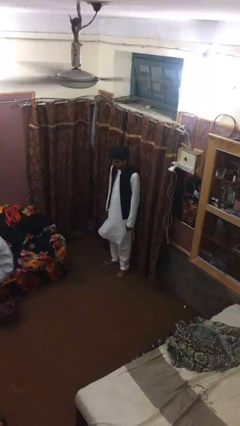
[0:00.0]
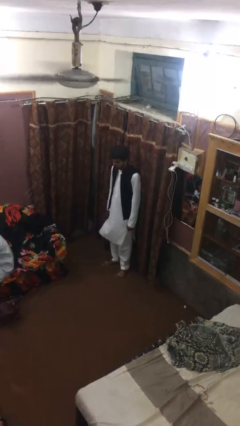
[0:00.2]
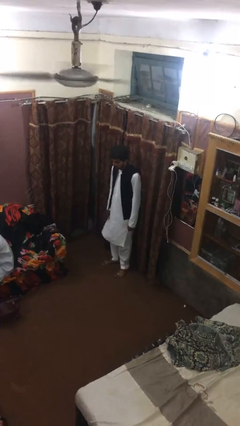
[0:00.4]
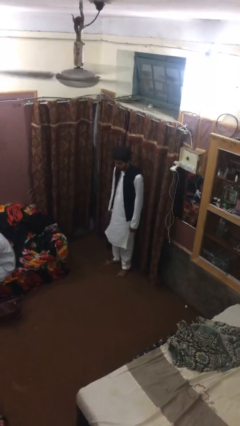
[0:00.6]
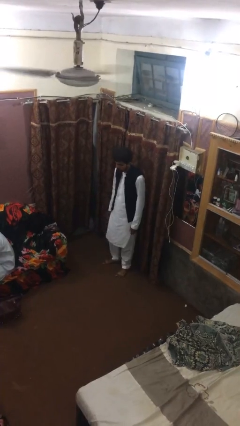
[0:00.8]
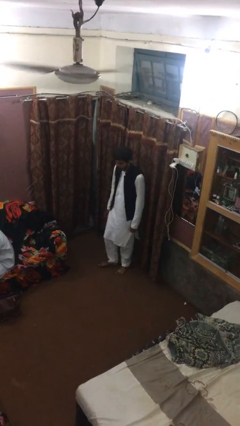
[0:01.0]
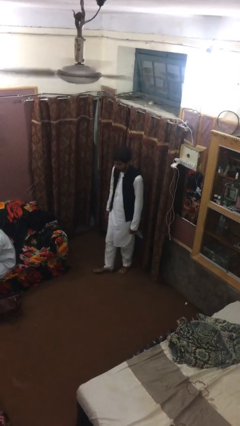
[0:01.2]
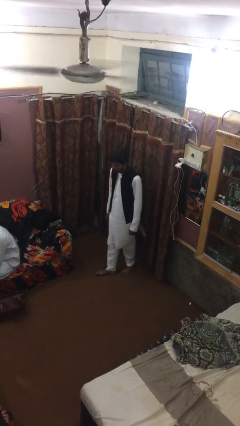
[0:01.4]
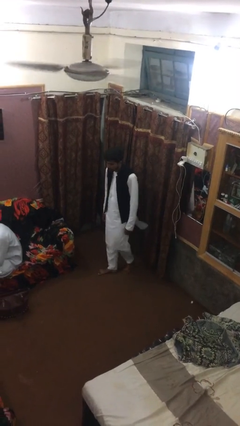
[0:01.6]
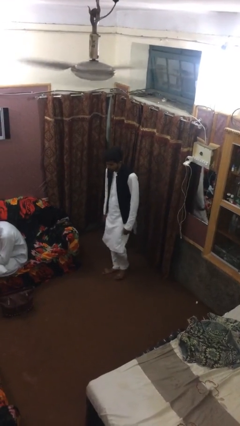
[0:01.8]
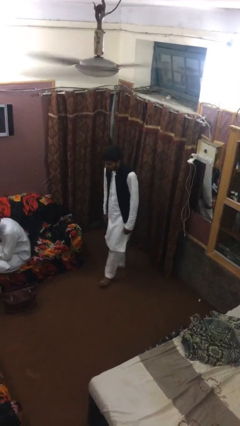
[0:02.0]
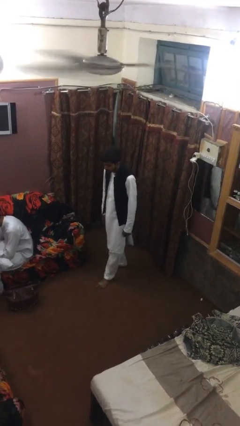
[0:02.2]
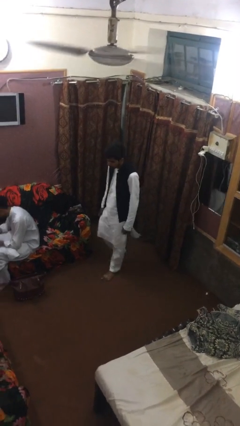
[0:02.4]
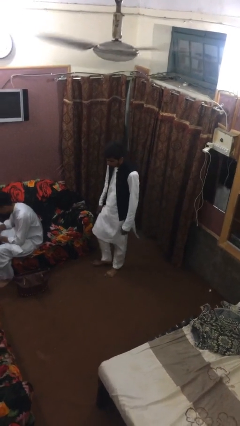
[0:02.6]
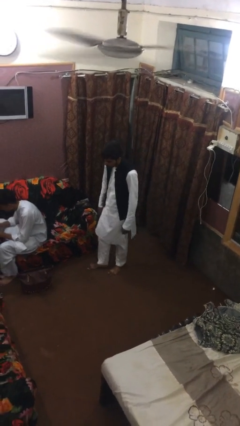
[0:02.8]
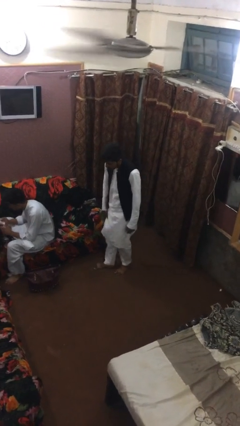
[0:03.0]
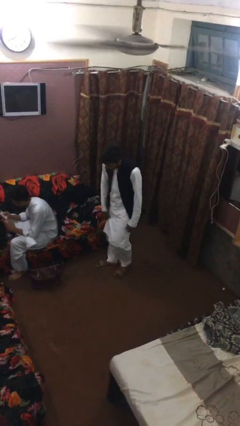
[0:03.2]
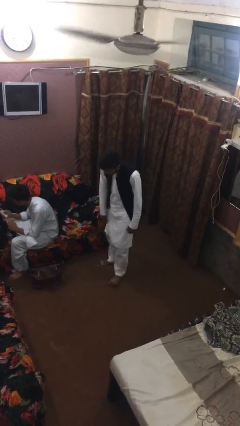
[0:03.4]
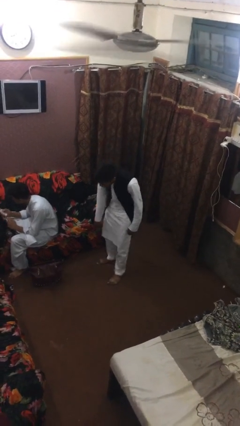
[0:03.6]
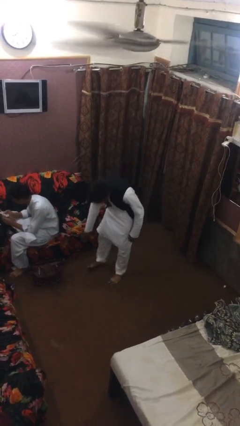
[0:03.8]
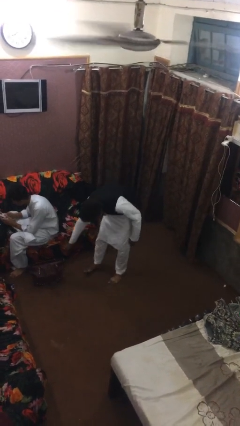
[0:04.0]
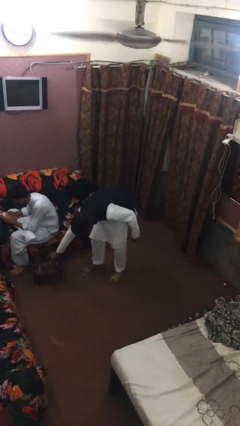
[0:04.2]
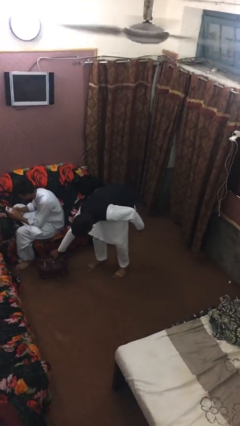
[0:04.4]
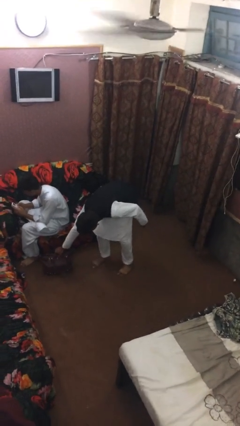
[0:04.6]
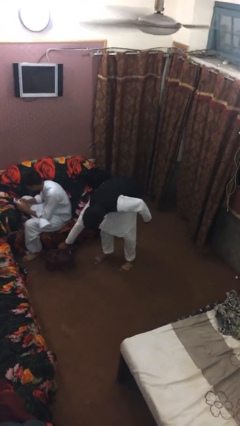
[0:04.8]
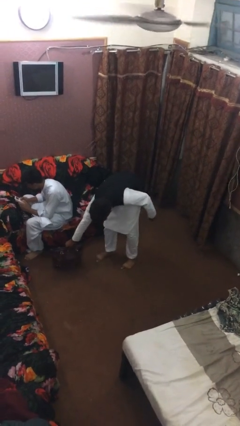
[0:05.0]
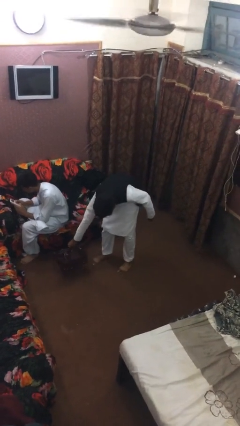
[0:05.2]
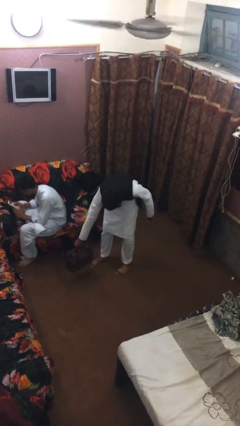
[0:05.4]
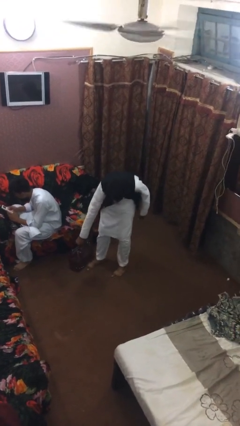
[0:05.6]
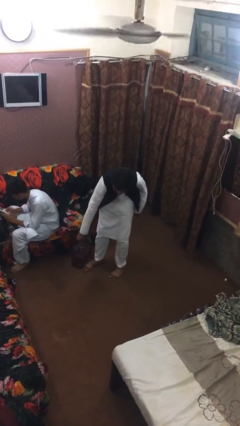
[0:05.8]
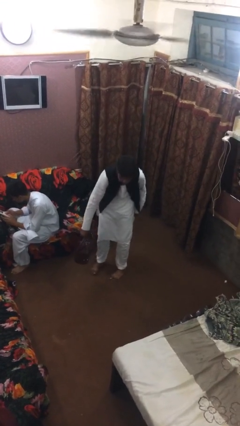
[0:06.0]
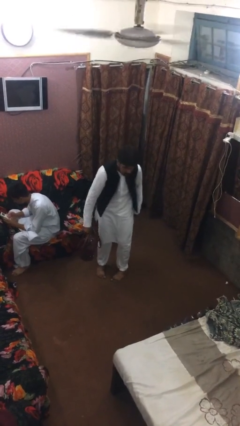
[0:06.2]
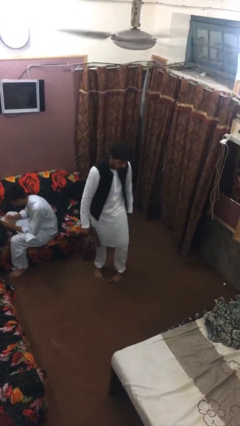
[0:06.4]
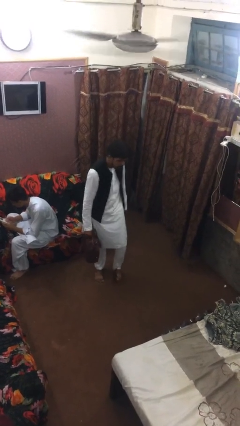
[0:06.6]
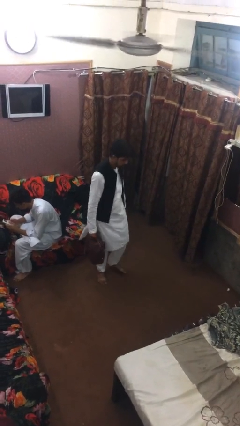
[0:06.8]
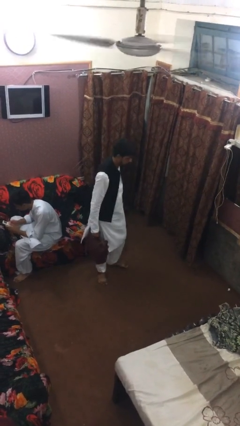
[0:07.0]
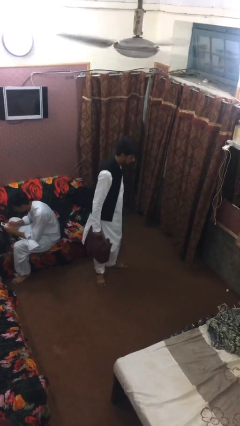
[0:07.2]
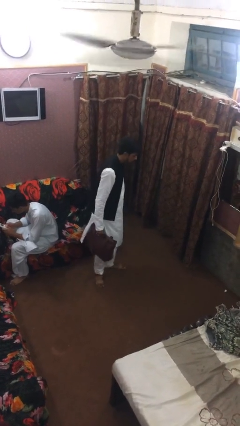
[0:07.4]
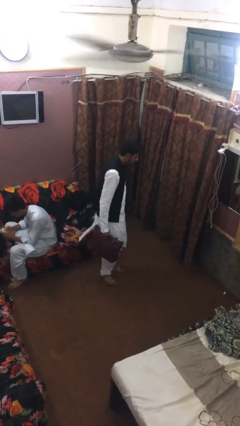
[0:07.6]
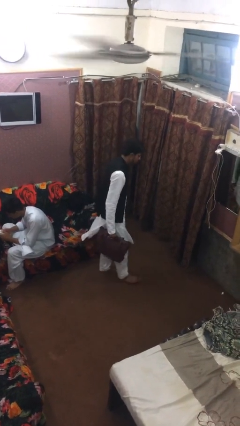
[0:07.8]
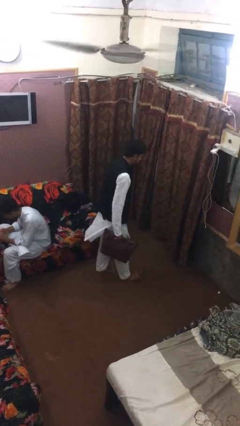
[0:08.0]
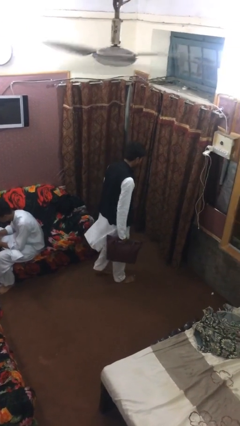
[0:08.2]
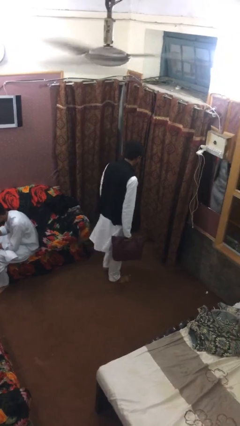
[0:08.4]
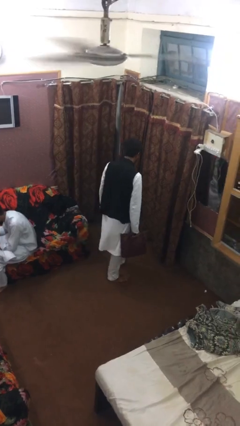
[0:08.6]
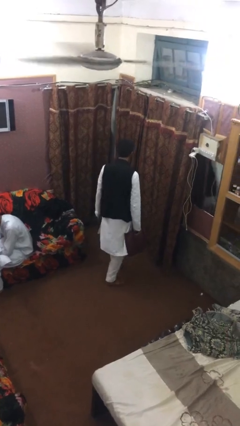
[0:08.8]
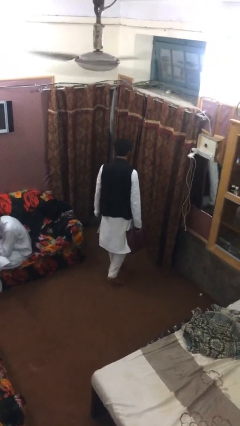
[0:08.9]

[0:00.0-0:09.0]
person steals object from person

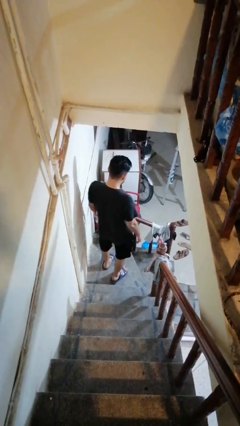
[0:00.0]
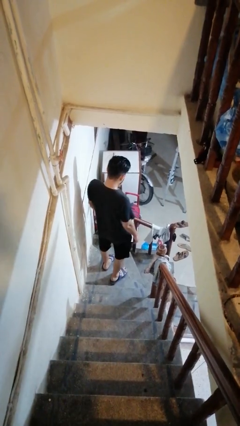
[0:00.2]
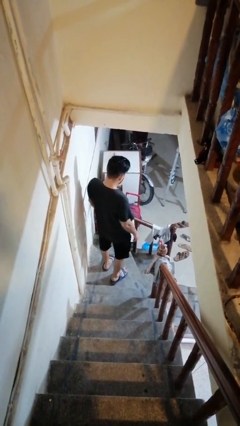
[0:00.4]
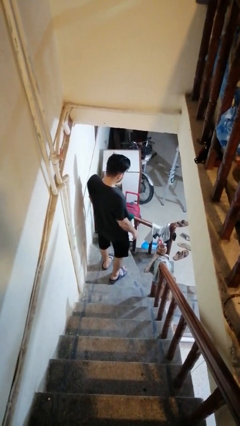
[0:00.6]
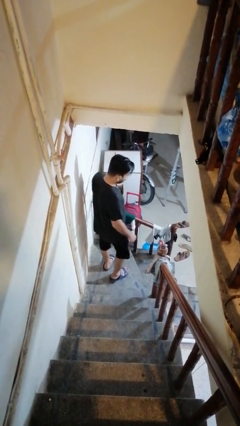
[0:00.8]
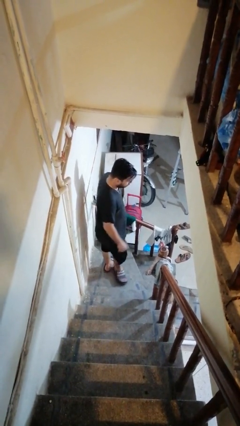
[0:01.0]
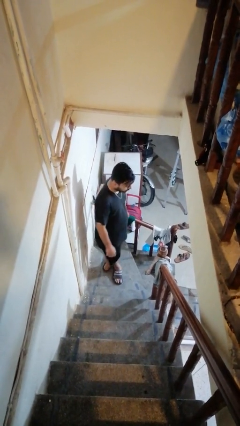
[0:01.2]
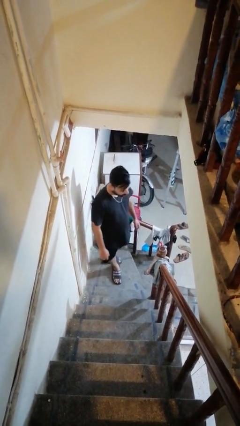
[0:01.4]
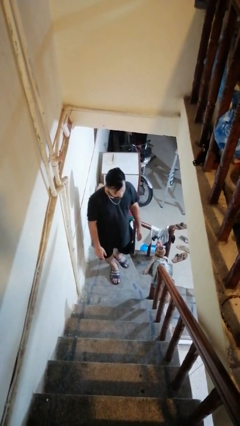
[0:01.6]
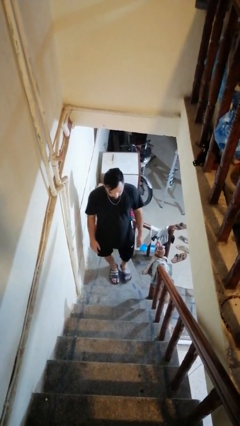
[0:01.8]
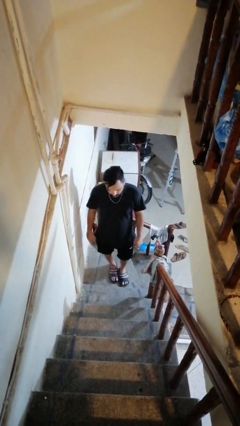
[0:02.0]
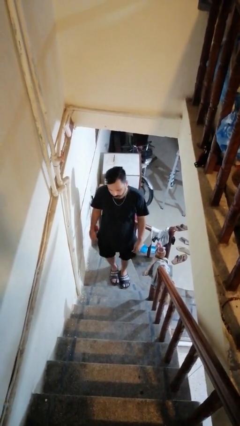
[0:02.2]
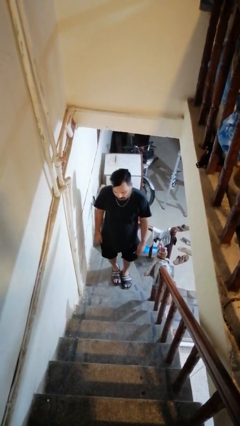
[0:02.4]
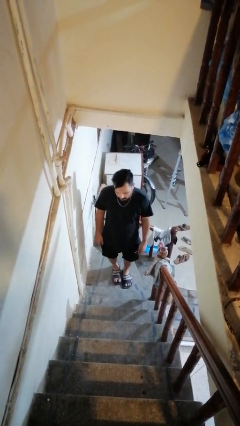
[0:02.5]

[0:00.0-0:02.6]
person trips on stair

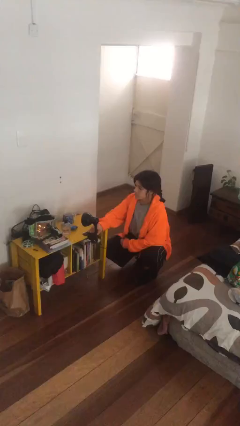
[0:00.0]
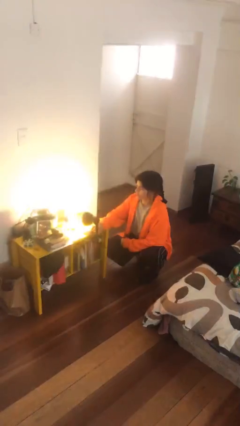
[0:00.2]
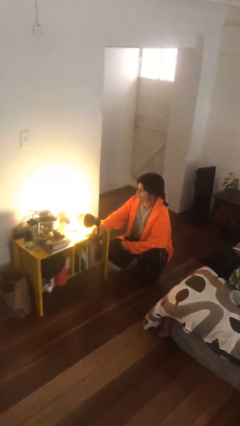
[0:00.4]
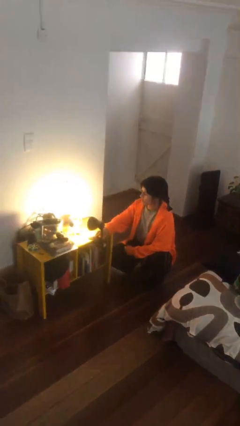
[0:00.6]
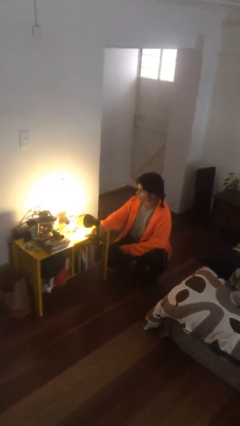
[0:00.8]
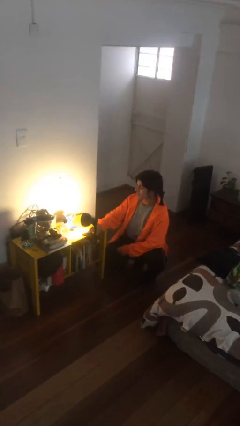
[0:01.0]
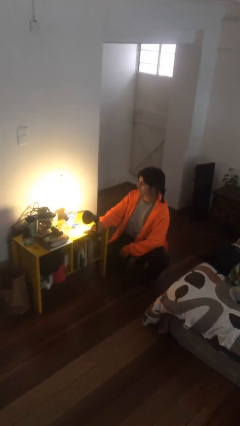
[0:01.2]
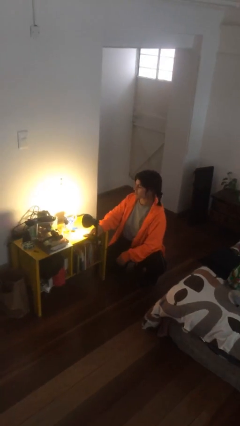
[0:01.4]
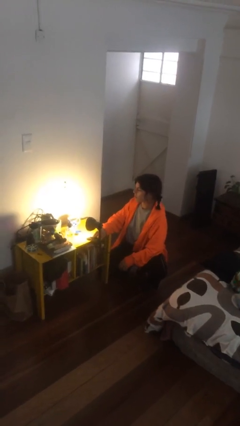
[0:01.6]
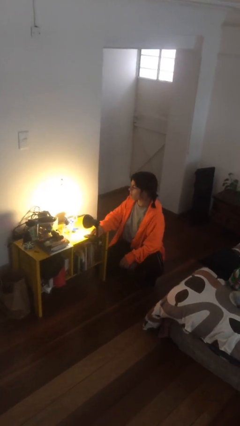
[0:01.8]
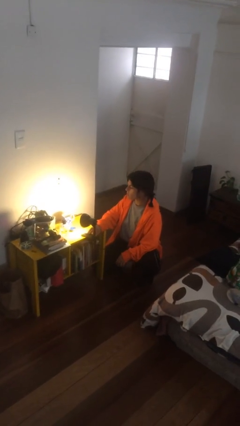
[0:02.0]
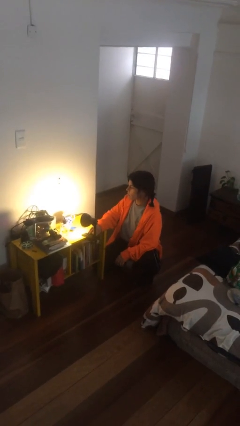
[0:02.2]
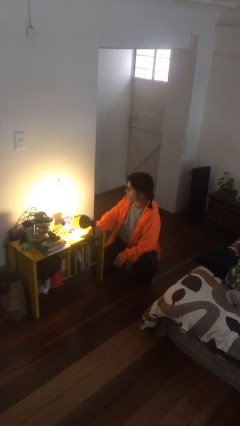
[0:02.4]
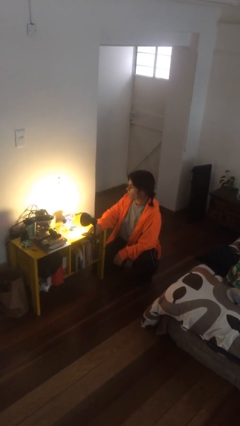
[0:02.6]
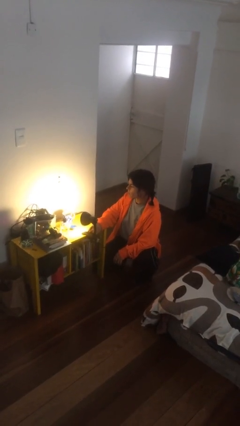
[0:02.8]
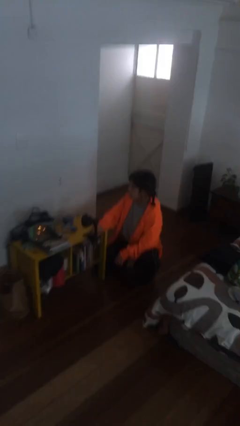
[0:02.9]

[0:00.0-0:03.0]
person turns on lamp

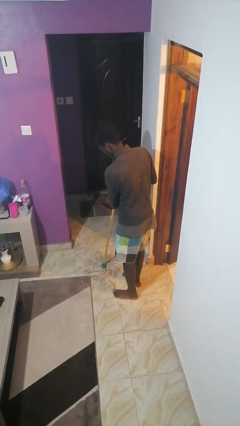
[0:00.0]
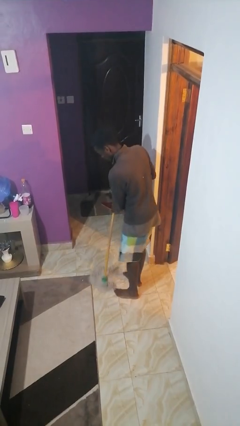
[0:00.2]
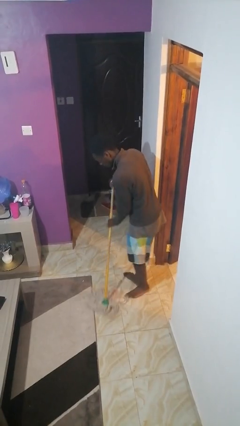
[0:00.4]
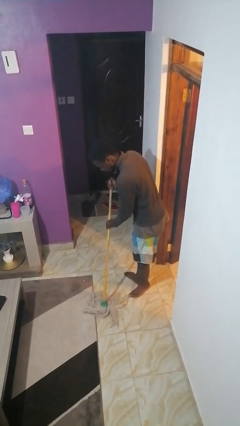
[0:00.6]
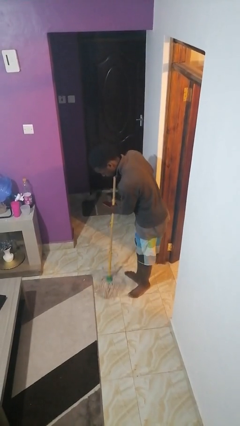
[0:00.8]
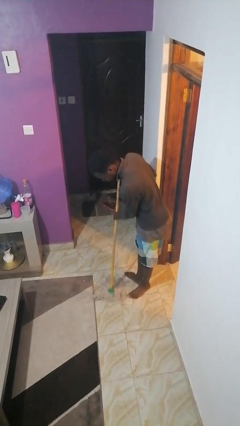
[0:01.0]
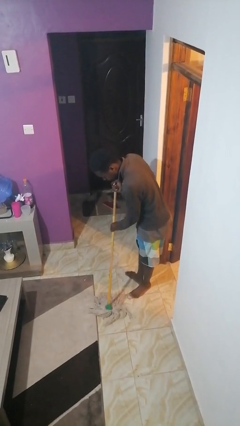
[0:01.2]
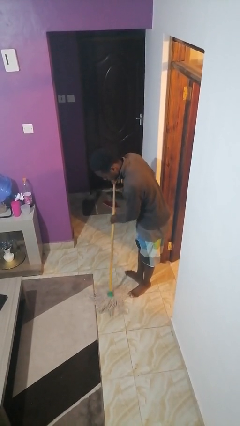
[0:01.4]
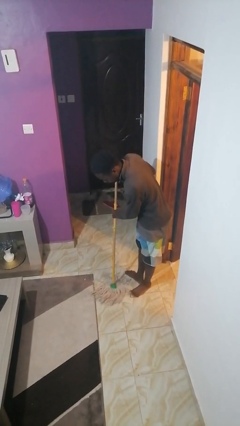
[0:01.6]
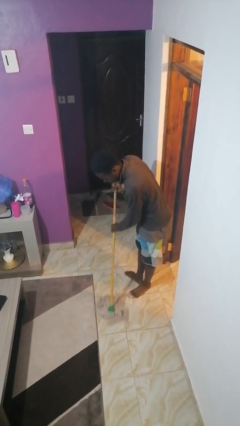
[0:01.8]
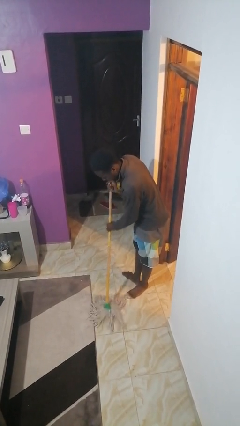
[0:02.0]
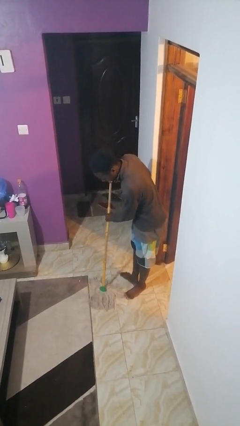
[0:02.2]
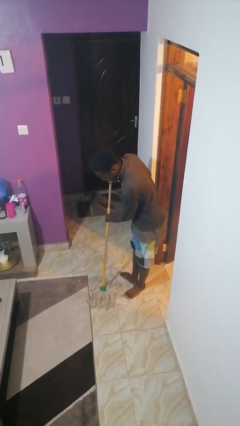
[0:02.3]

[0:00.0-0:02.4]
person mops

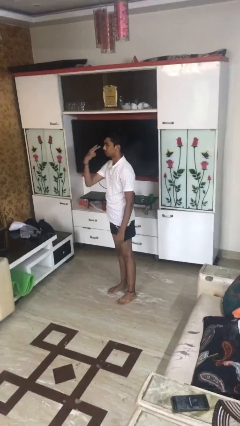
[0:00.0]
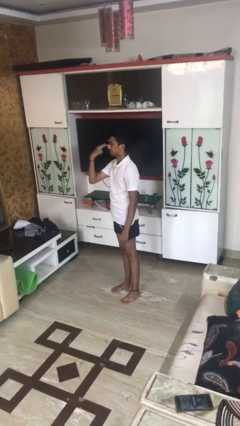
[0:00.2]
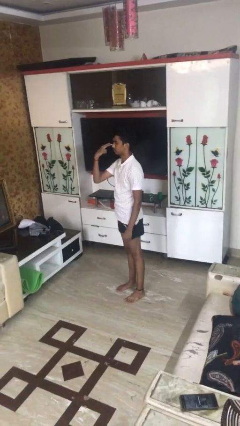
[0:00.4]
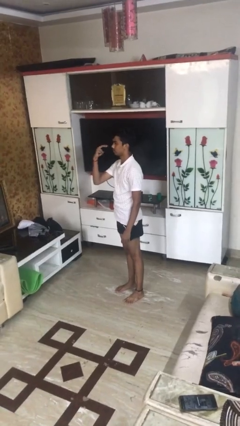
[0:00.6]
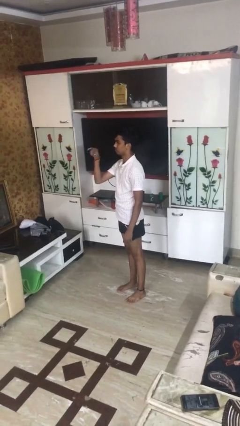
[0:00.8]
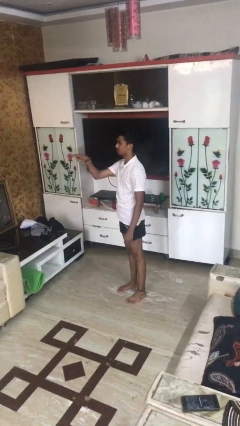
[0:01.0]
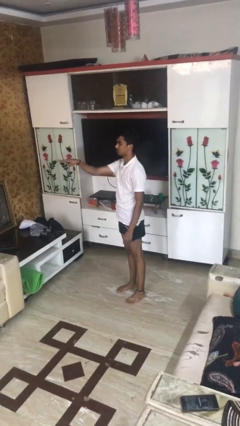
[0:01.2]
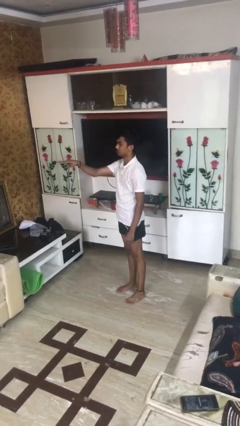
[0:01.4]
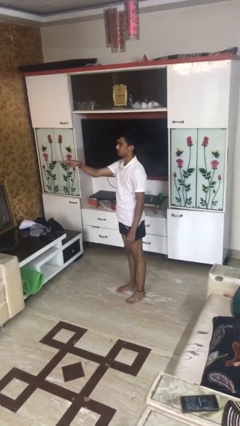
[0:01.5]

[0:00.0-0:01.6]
person gestures watch closely
